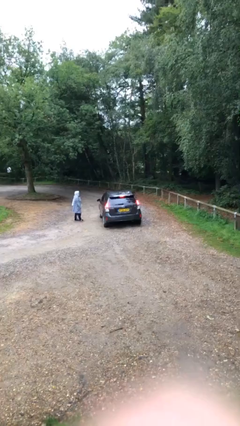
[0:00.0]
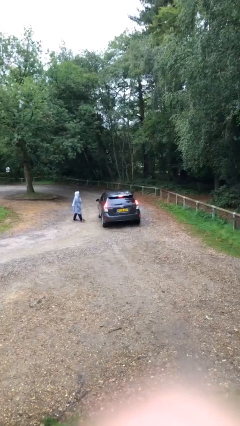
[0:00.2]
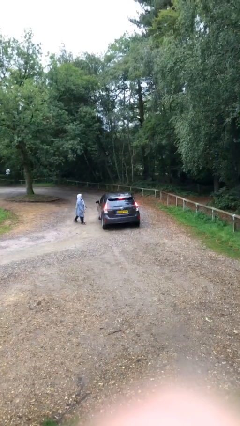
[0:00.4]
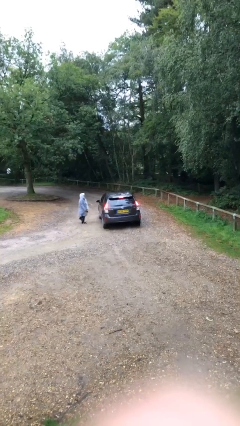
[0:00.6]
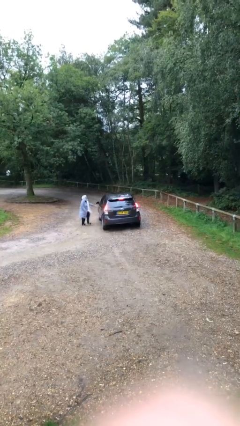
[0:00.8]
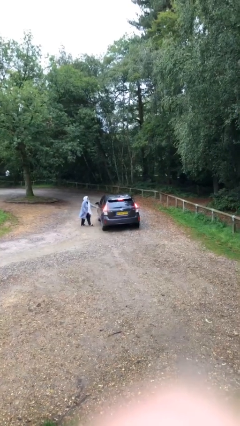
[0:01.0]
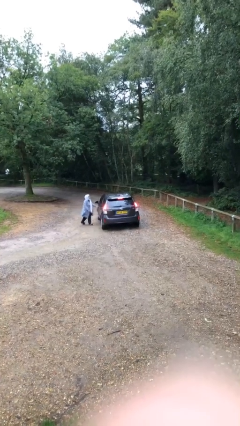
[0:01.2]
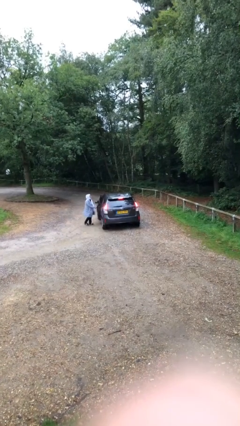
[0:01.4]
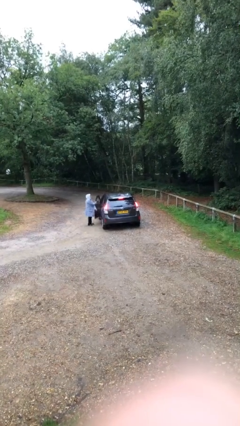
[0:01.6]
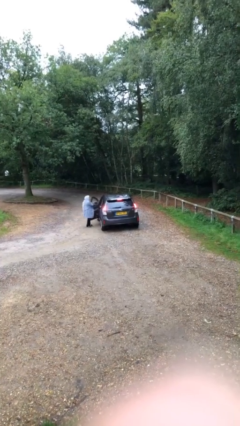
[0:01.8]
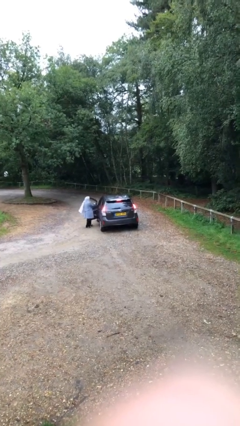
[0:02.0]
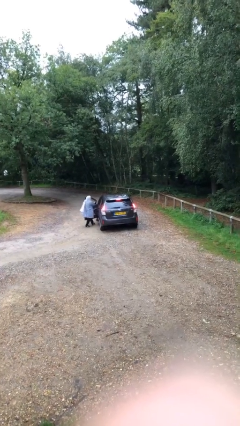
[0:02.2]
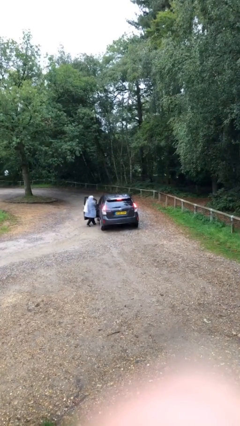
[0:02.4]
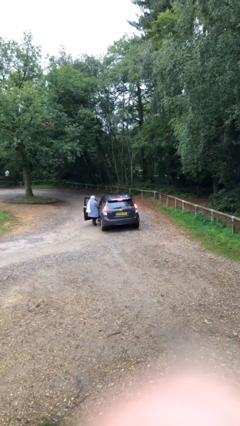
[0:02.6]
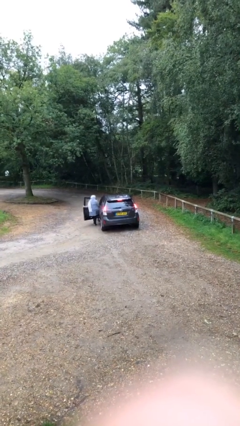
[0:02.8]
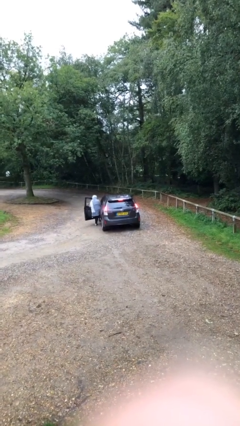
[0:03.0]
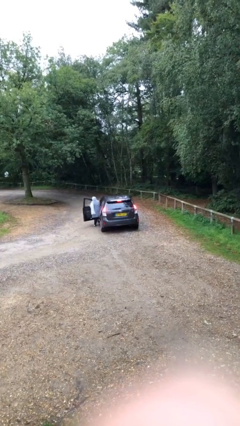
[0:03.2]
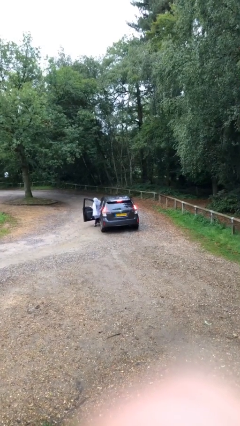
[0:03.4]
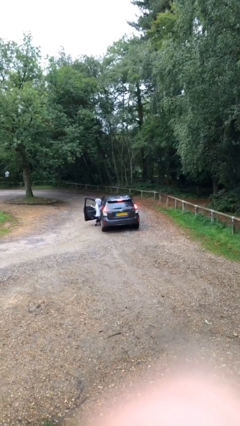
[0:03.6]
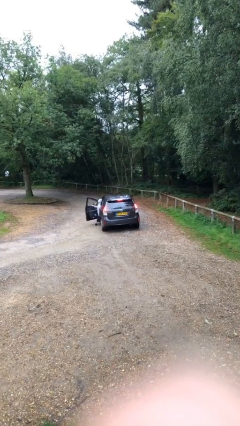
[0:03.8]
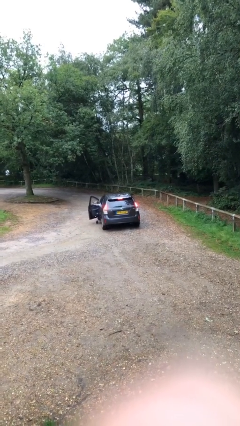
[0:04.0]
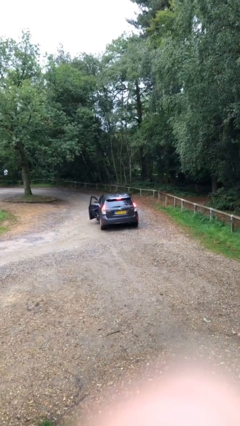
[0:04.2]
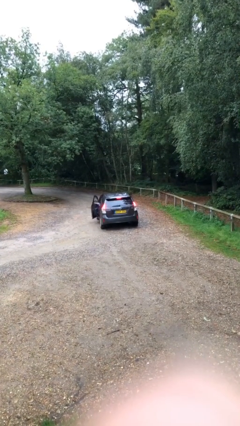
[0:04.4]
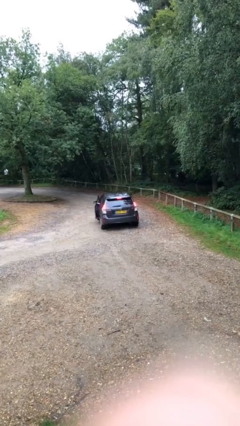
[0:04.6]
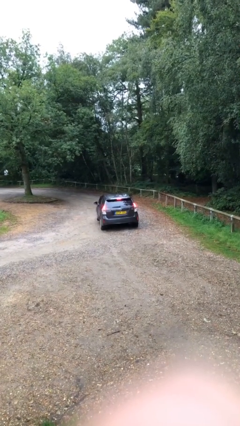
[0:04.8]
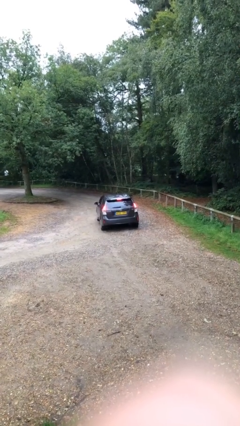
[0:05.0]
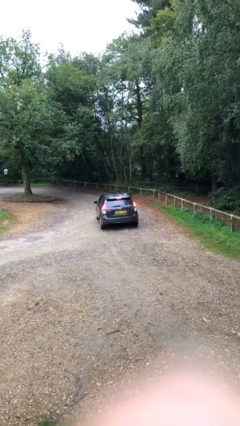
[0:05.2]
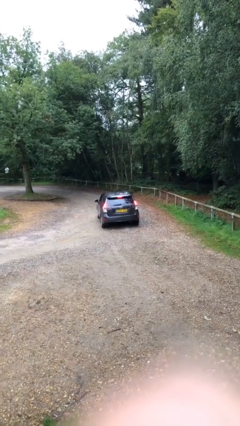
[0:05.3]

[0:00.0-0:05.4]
car picks up person

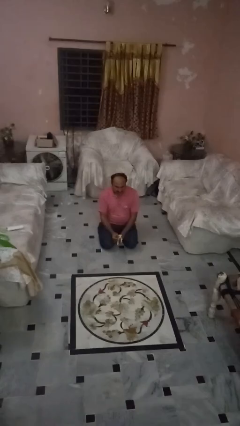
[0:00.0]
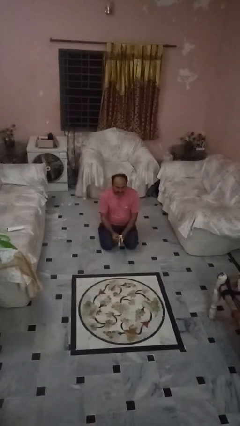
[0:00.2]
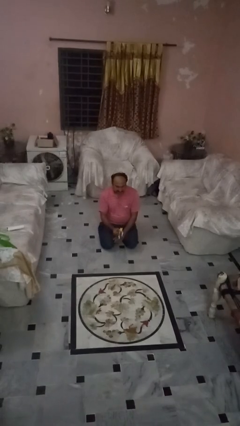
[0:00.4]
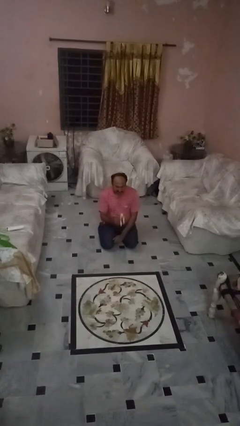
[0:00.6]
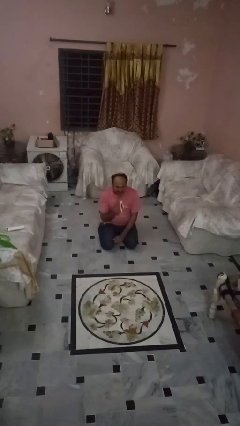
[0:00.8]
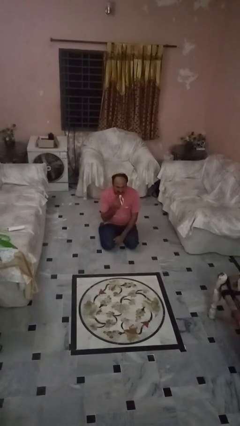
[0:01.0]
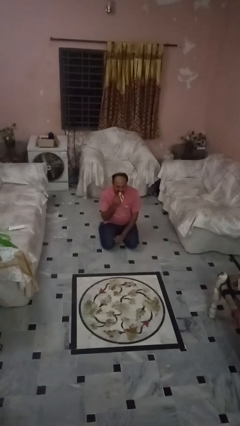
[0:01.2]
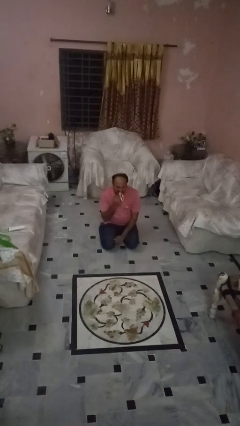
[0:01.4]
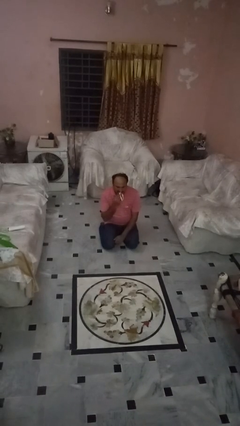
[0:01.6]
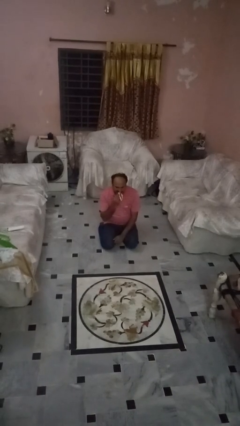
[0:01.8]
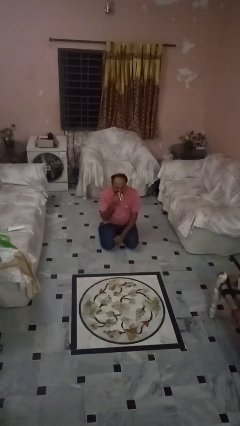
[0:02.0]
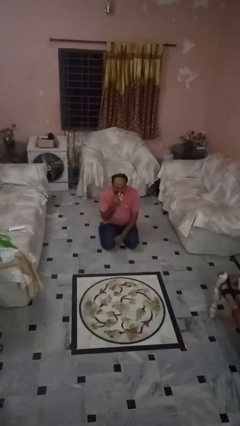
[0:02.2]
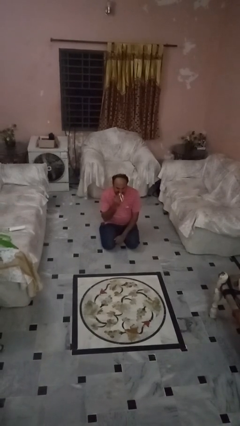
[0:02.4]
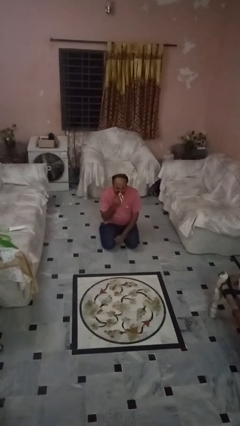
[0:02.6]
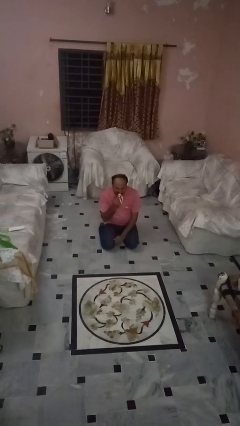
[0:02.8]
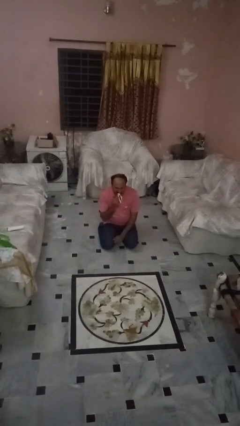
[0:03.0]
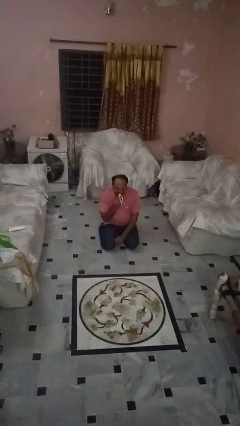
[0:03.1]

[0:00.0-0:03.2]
person eats banana

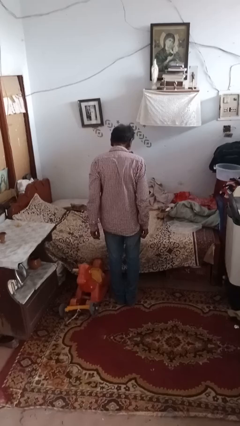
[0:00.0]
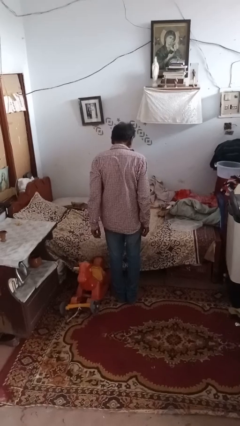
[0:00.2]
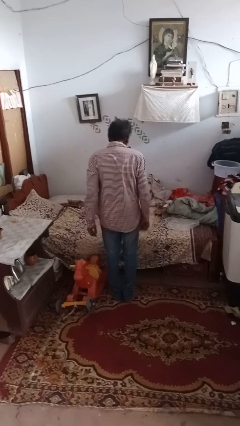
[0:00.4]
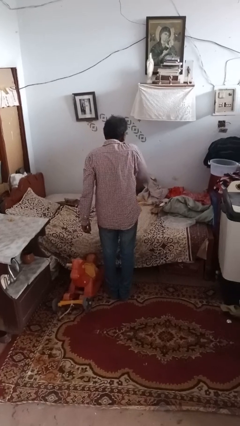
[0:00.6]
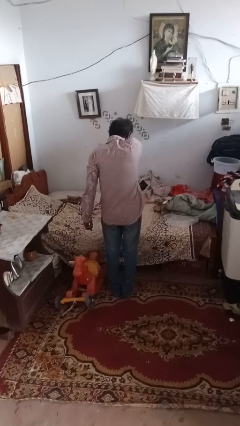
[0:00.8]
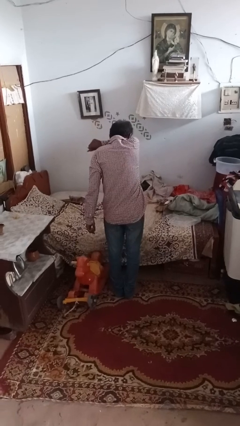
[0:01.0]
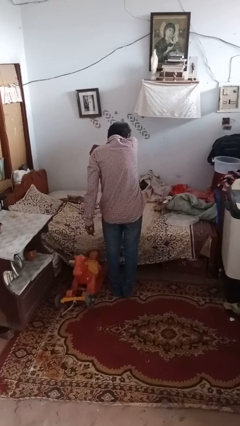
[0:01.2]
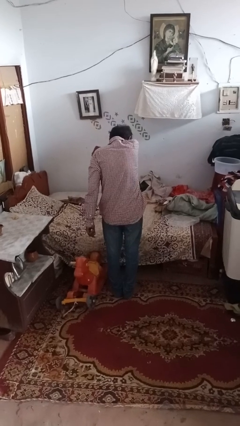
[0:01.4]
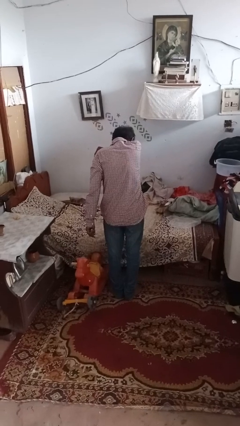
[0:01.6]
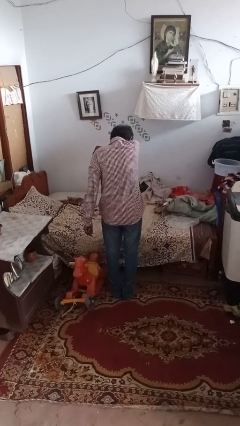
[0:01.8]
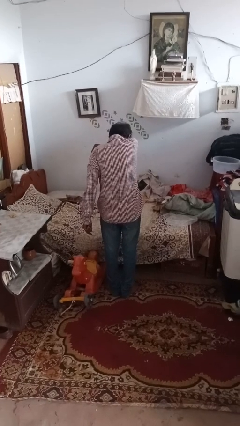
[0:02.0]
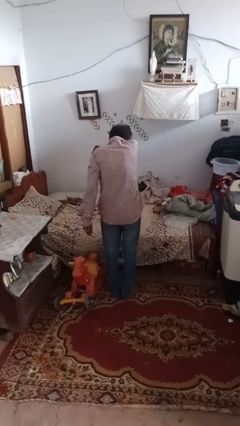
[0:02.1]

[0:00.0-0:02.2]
person sneezes into hand

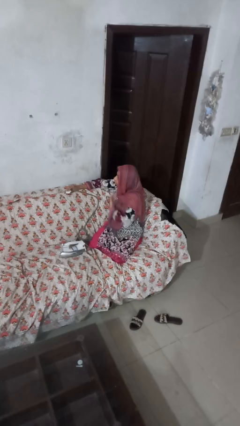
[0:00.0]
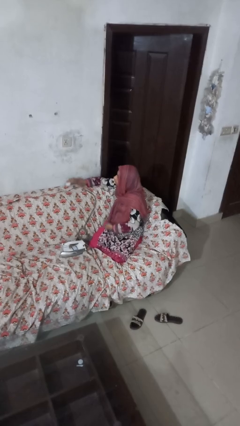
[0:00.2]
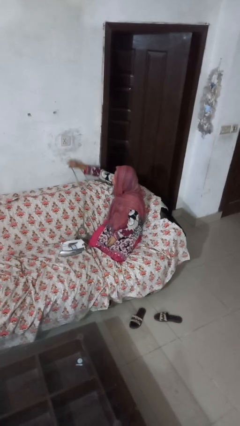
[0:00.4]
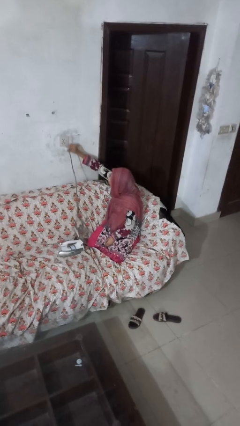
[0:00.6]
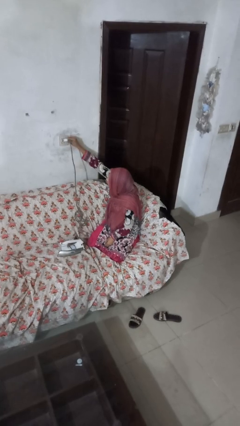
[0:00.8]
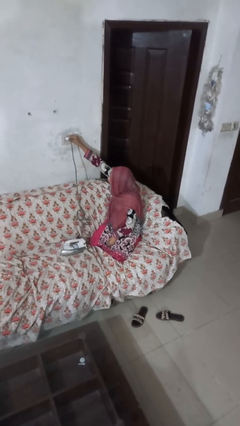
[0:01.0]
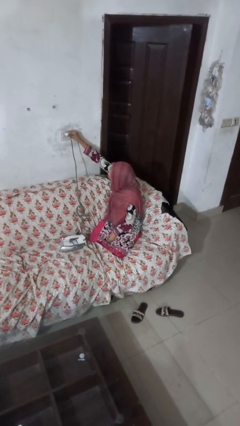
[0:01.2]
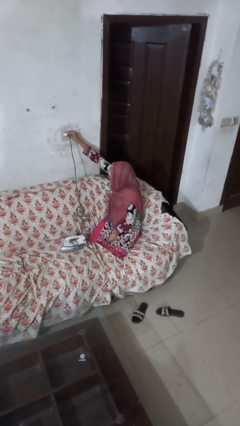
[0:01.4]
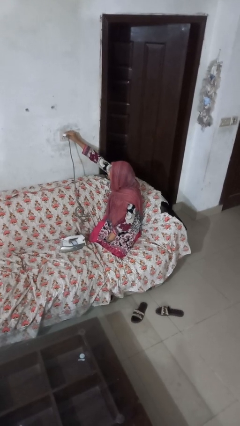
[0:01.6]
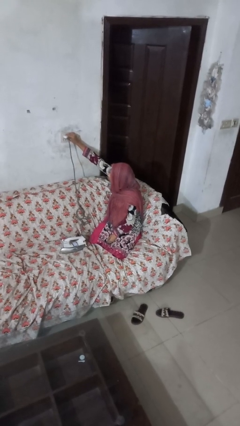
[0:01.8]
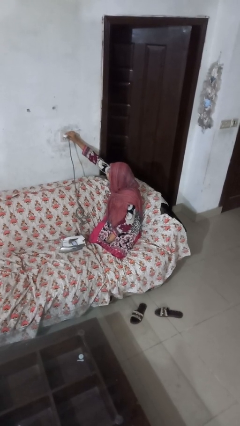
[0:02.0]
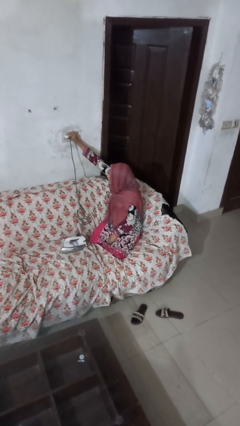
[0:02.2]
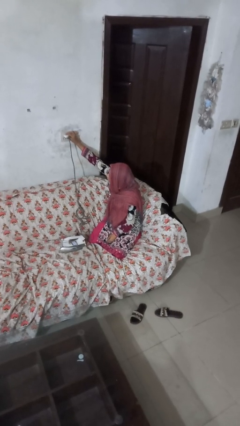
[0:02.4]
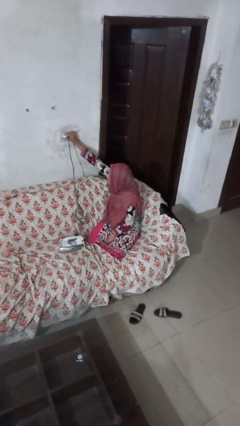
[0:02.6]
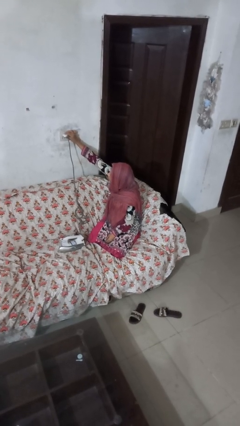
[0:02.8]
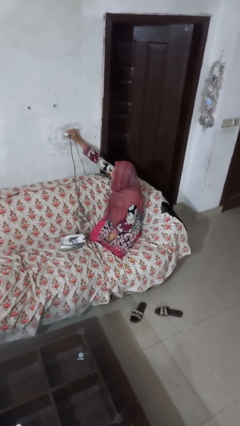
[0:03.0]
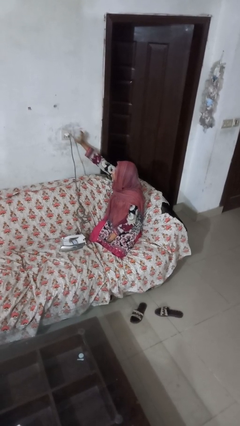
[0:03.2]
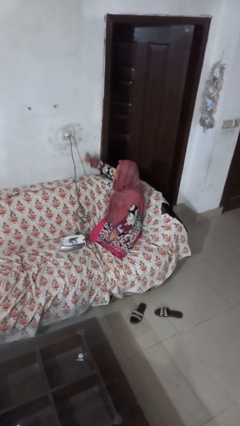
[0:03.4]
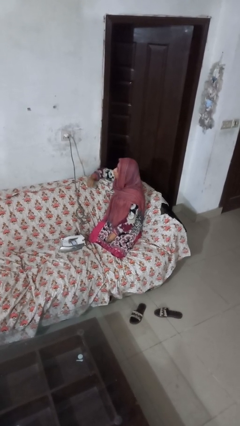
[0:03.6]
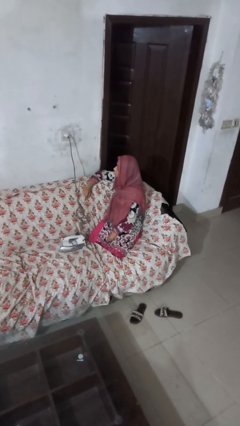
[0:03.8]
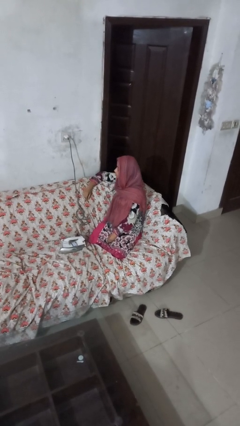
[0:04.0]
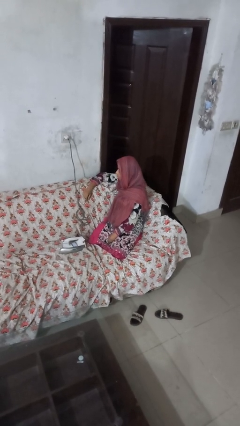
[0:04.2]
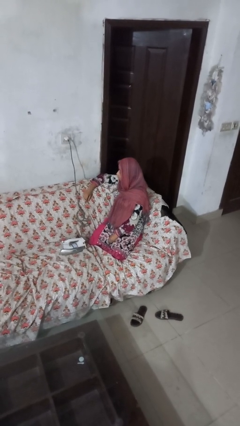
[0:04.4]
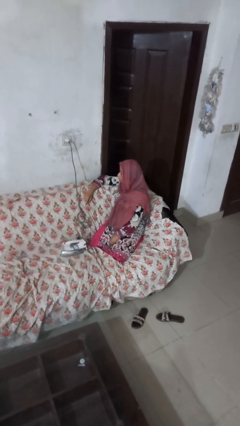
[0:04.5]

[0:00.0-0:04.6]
person plugs into electrical socket

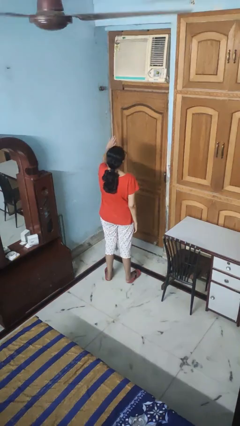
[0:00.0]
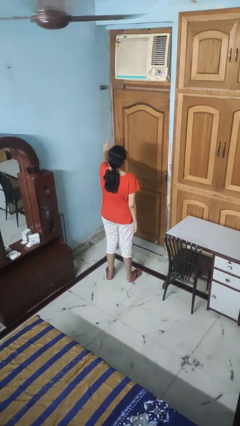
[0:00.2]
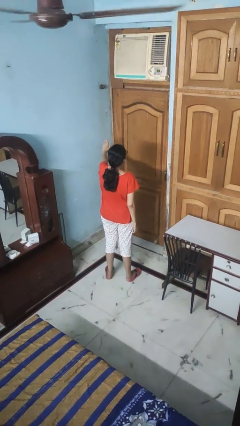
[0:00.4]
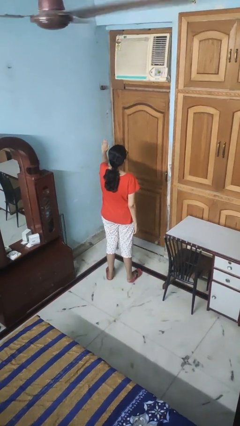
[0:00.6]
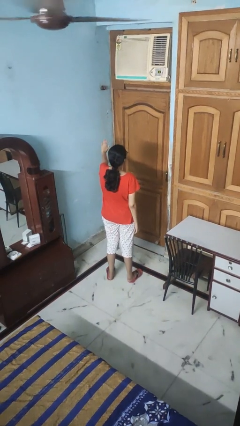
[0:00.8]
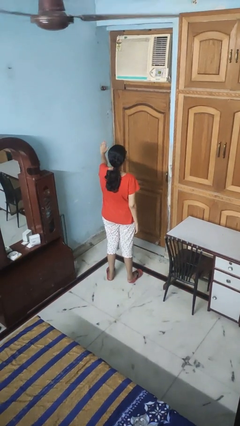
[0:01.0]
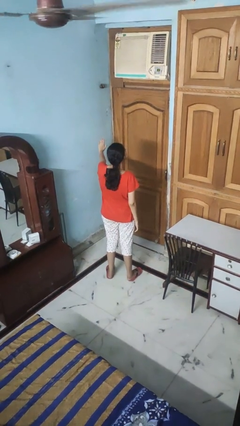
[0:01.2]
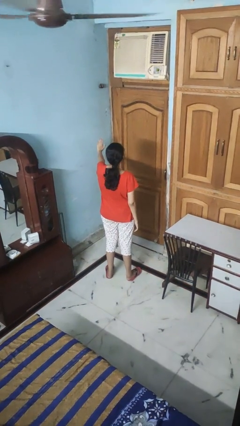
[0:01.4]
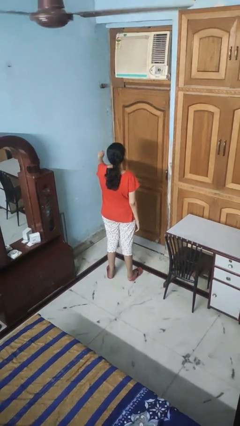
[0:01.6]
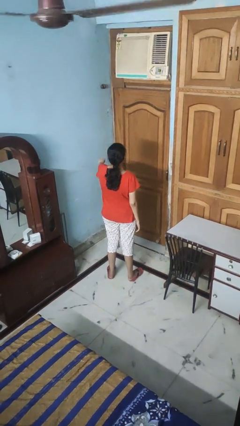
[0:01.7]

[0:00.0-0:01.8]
person gestures stop

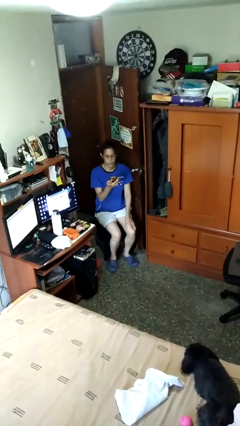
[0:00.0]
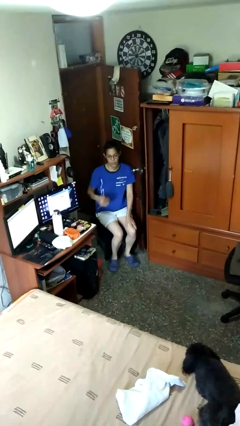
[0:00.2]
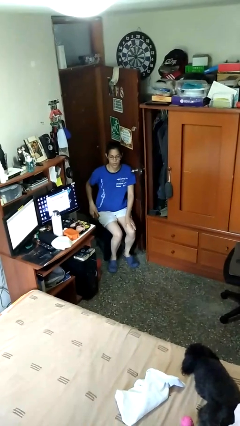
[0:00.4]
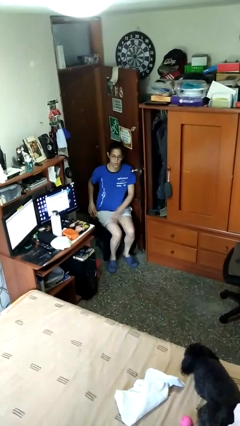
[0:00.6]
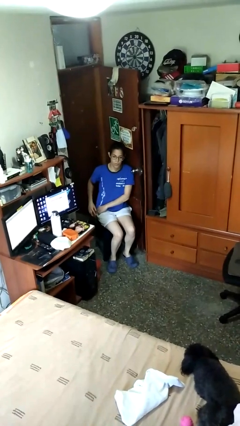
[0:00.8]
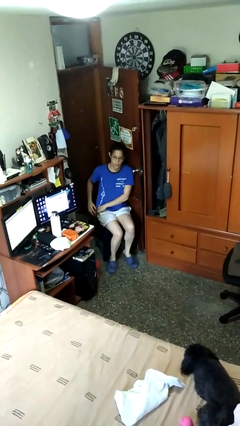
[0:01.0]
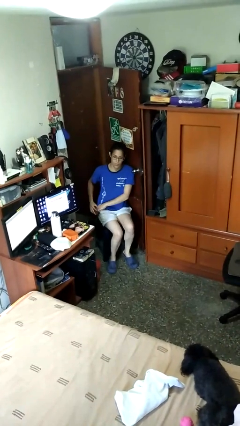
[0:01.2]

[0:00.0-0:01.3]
person puts phone into pocket
